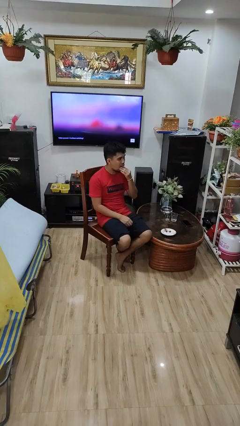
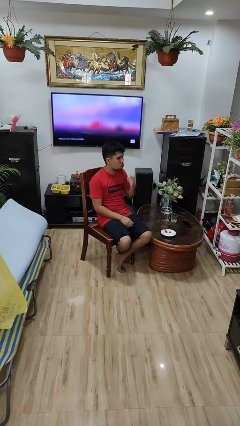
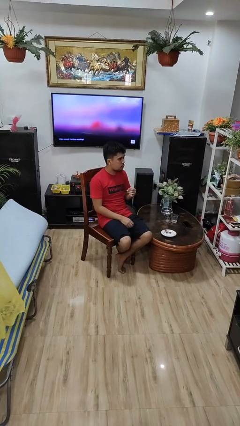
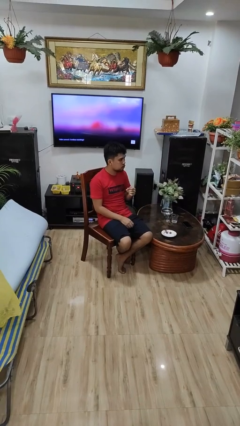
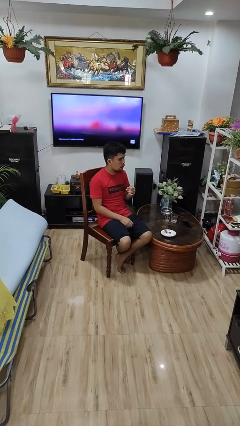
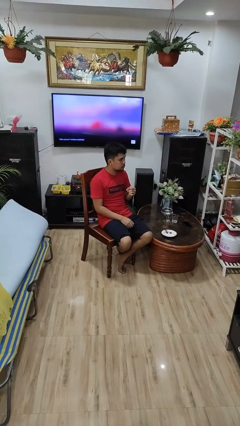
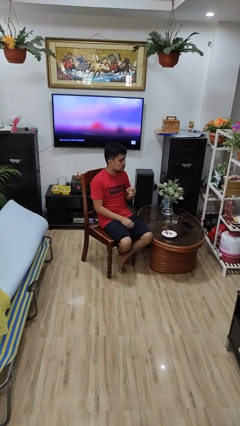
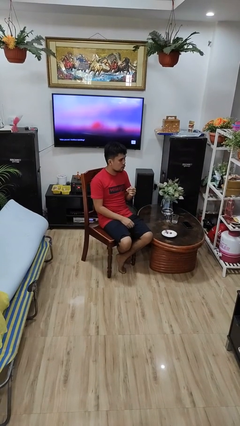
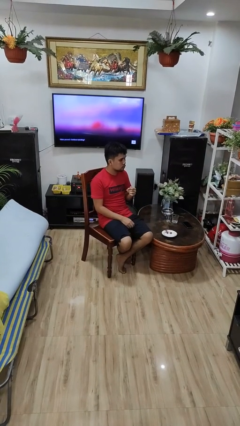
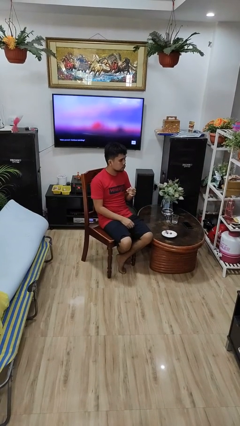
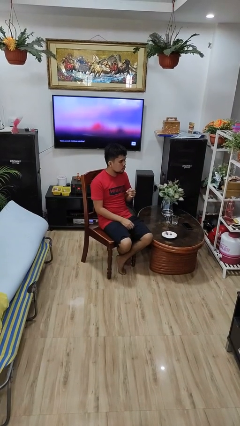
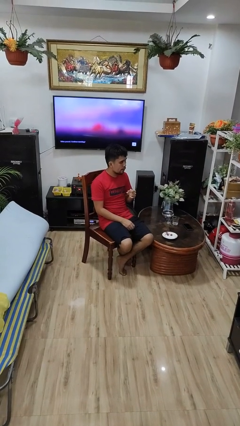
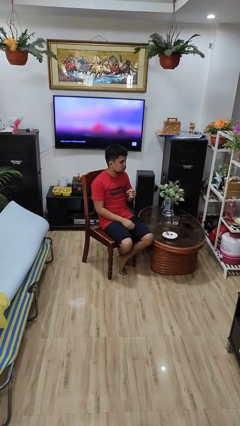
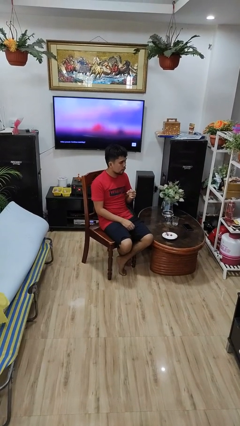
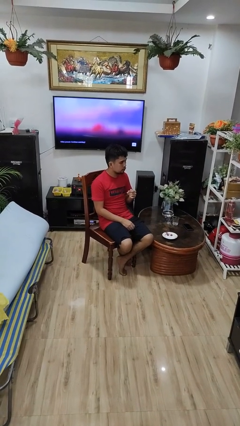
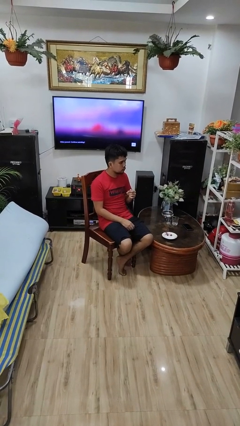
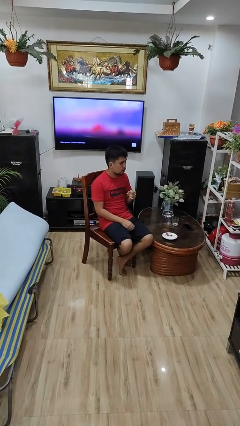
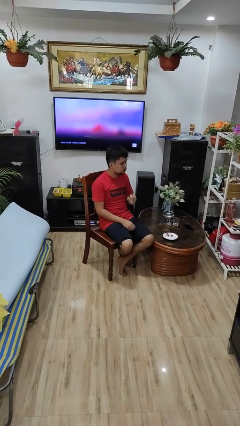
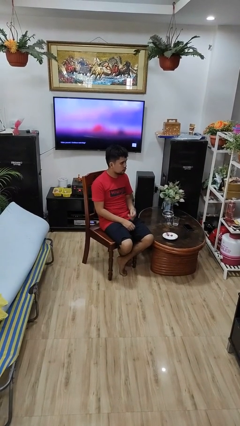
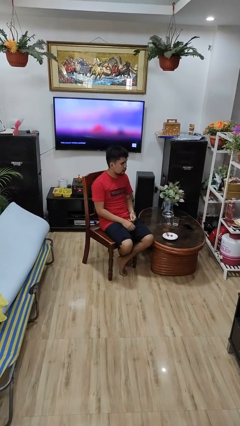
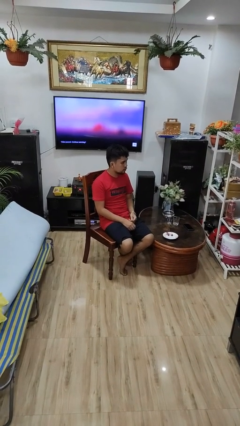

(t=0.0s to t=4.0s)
person eats with hands

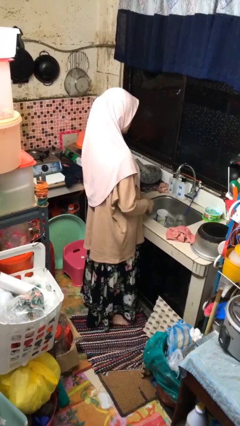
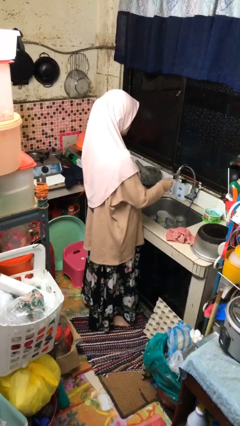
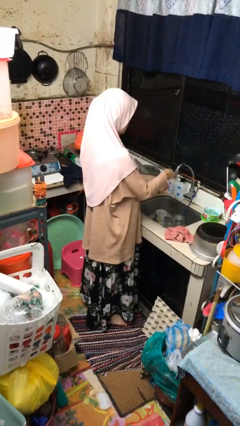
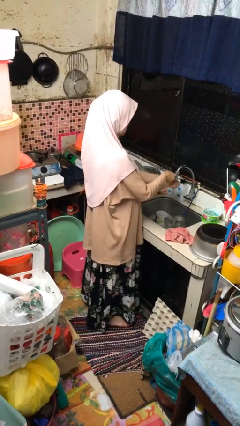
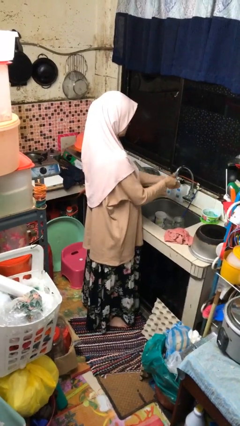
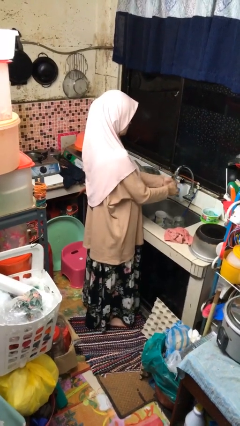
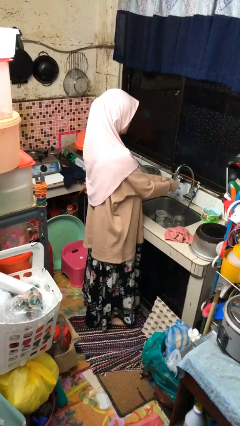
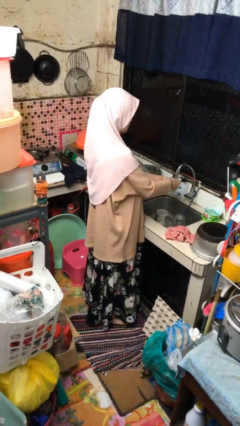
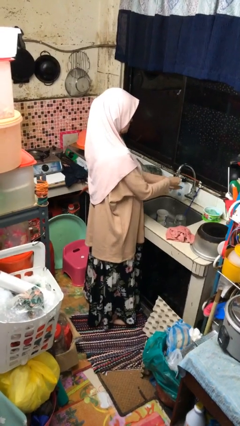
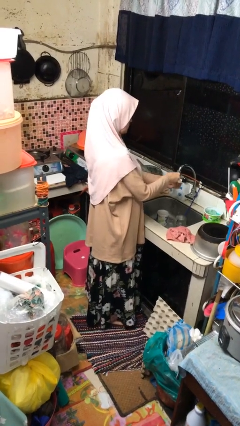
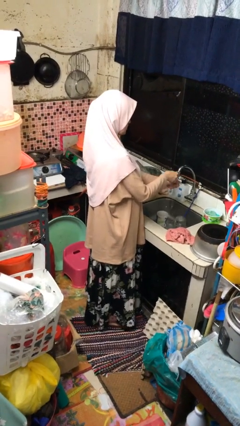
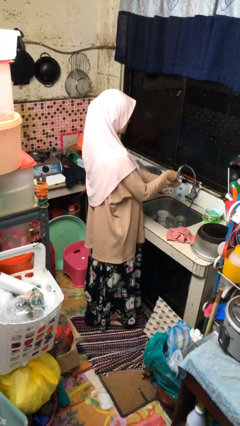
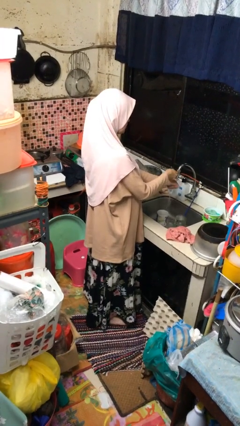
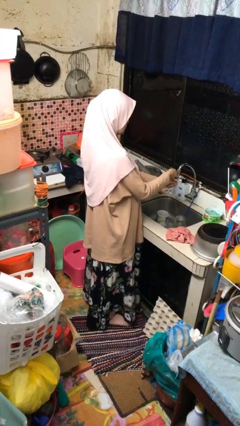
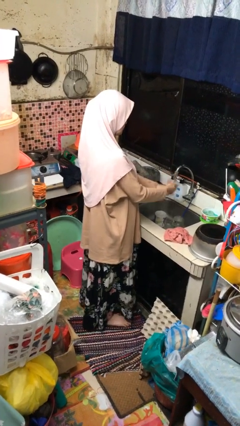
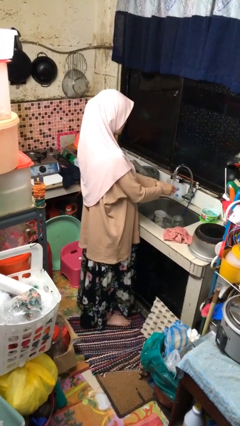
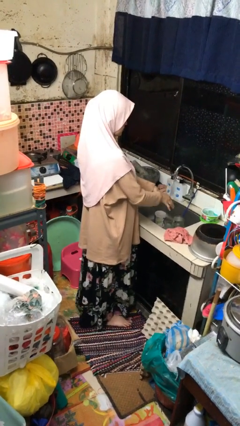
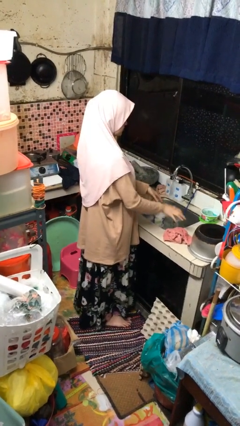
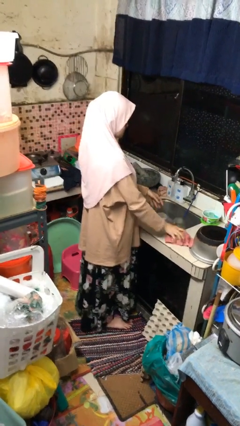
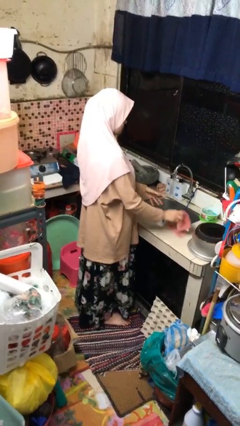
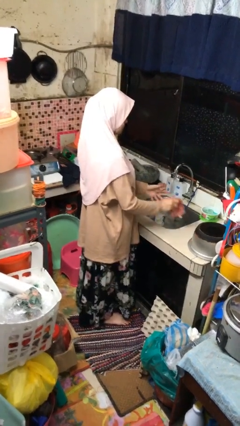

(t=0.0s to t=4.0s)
person washes hands

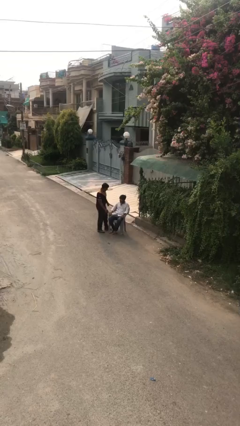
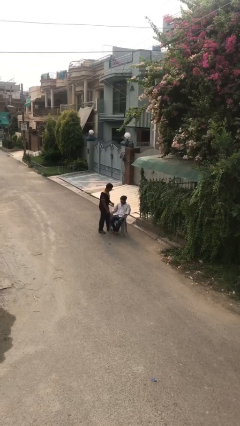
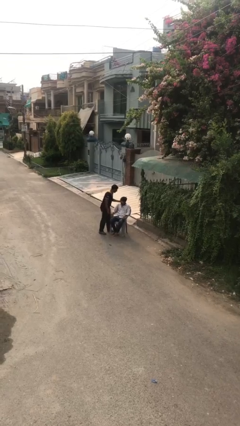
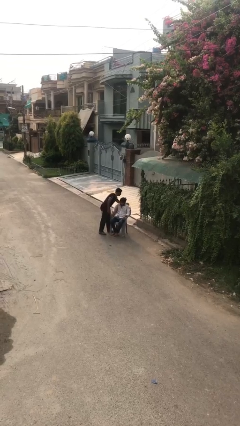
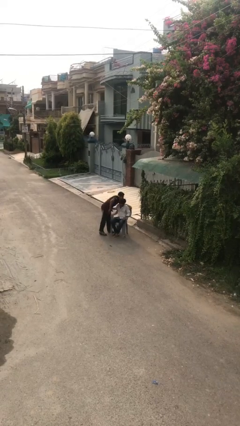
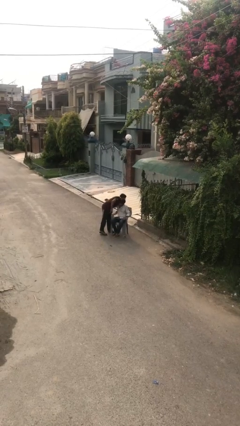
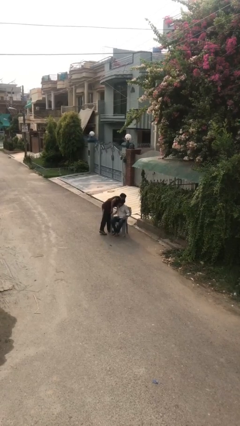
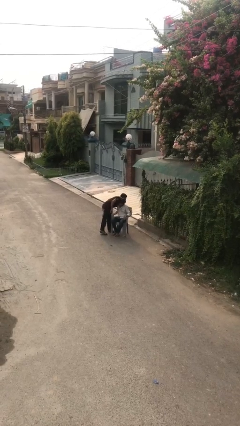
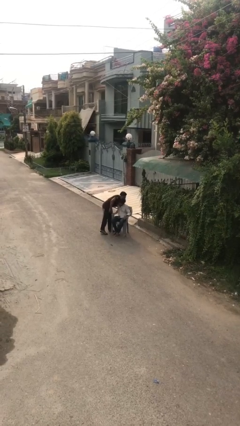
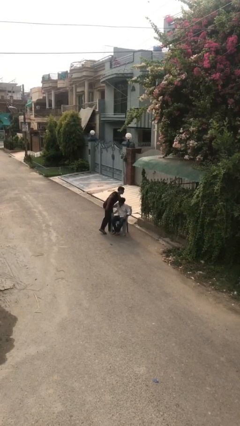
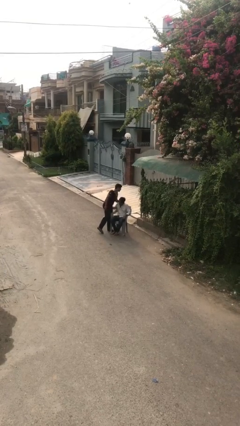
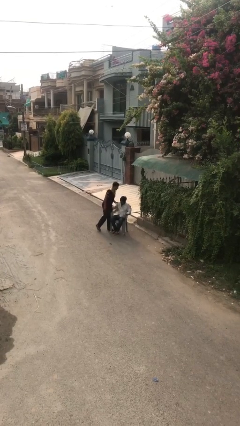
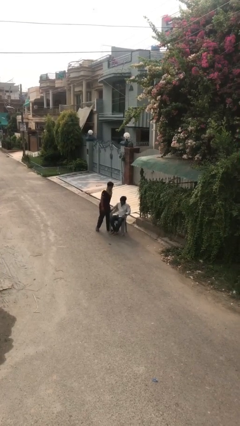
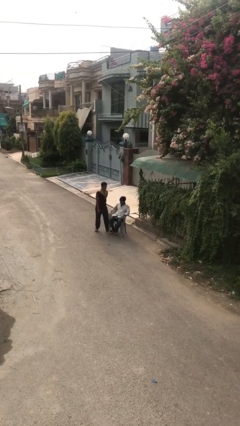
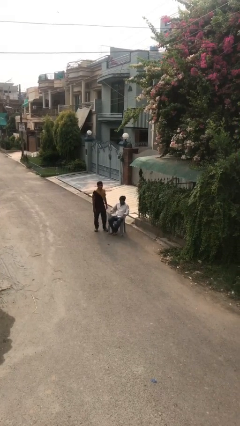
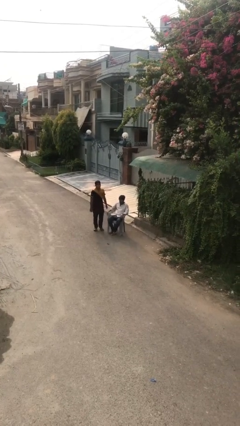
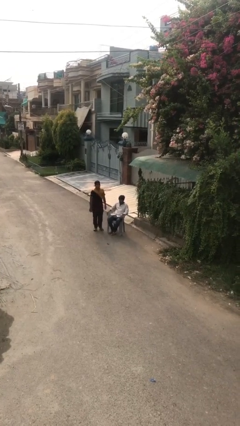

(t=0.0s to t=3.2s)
person embraces person

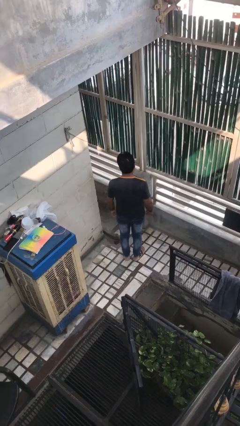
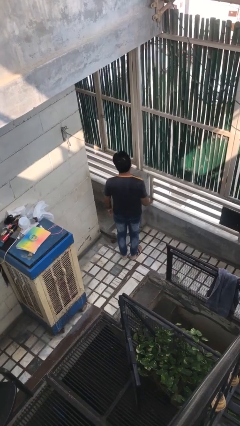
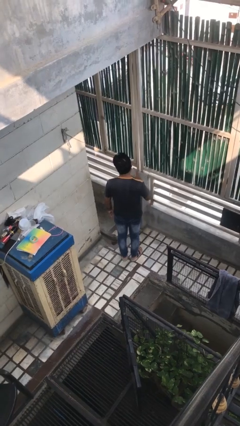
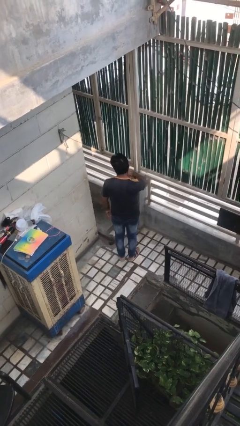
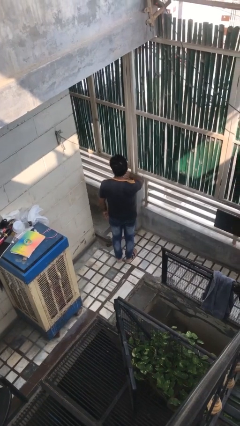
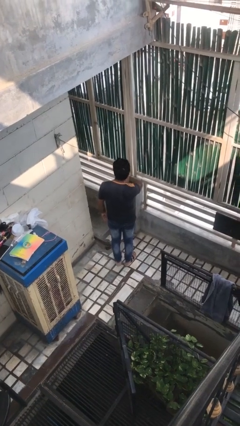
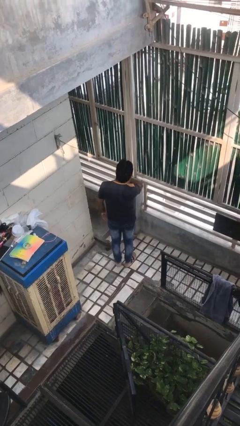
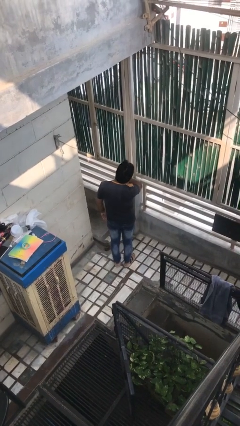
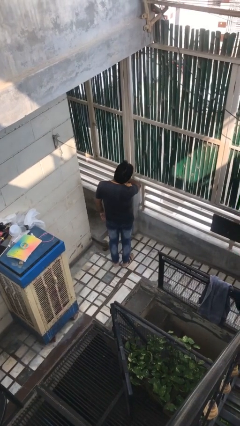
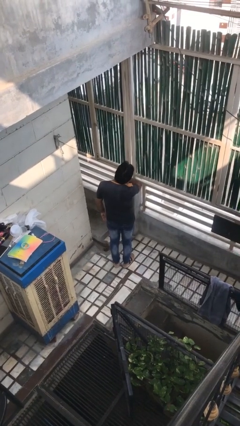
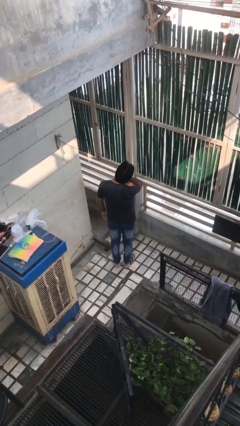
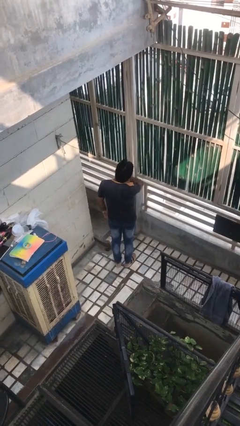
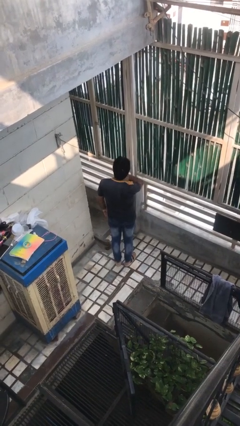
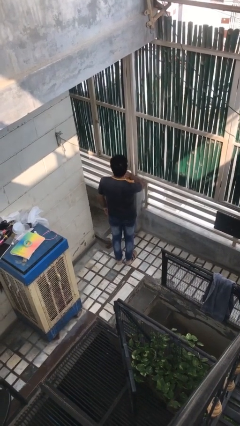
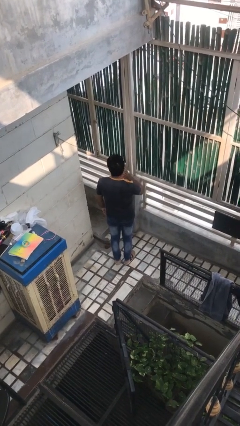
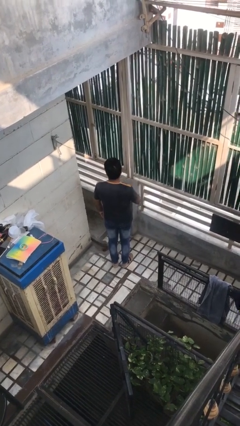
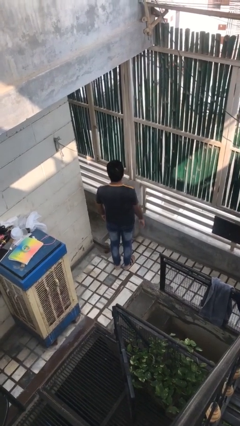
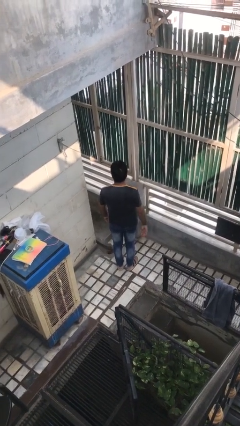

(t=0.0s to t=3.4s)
person rubs neck

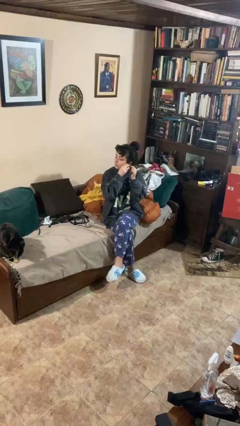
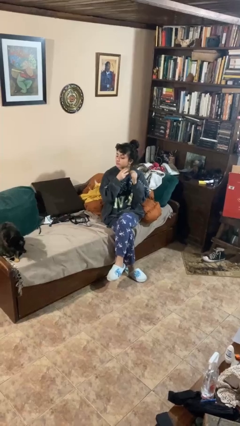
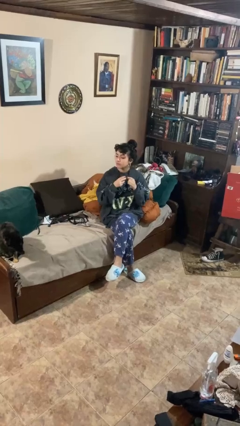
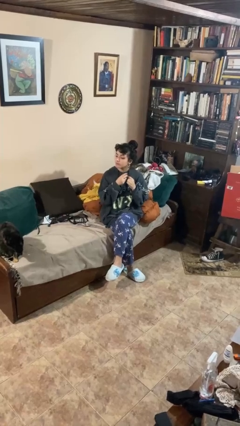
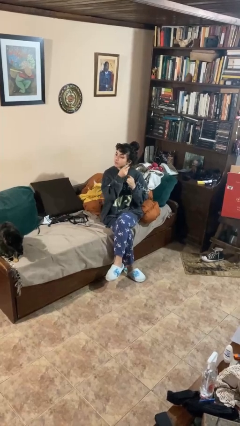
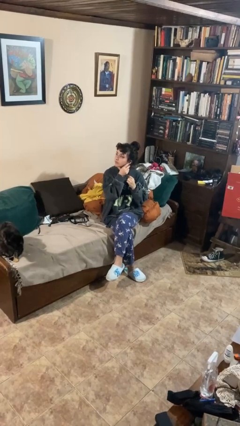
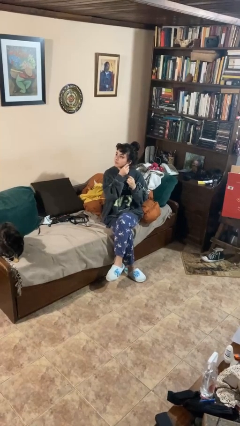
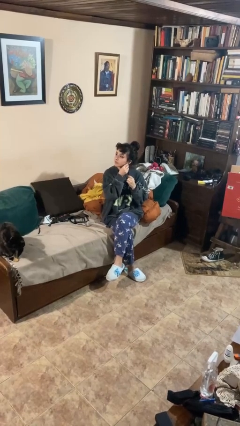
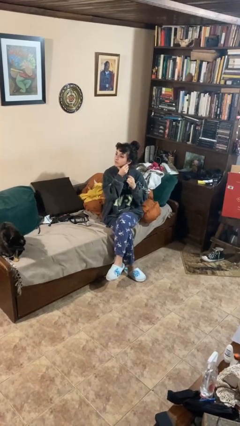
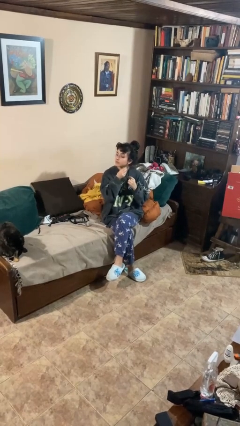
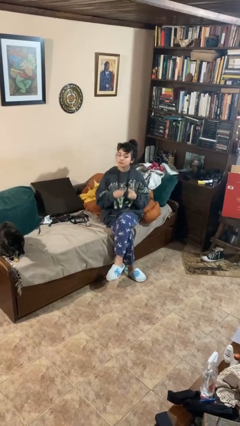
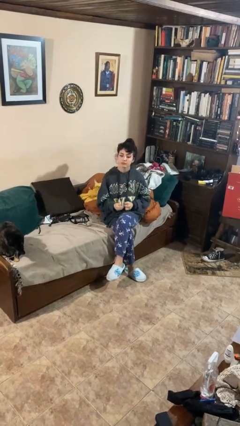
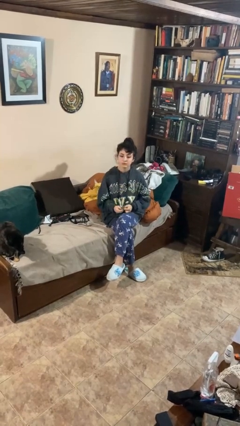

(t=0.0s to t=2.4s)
person takes off earrings

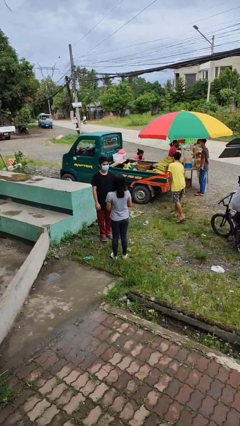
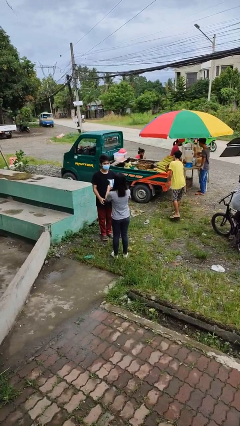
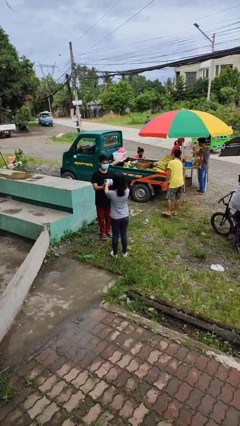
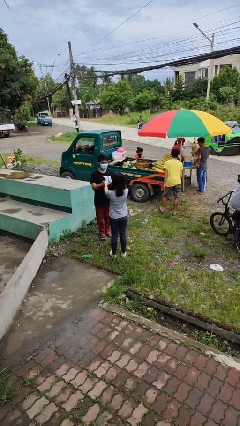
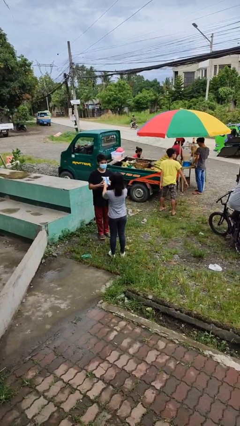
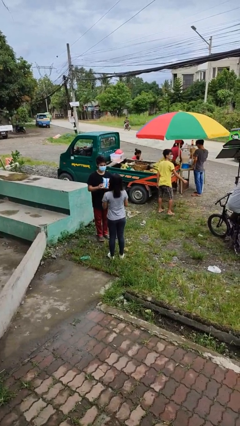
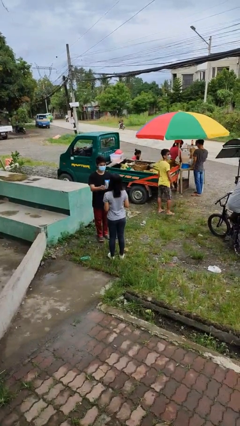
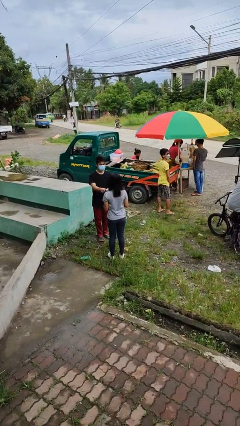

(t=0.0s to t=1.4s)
person transfers object to person
